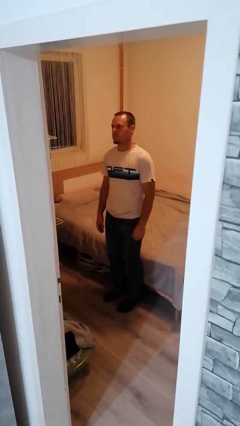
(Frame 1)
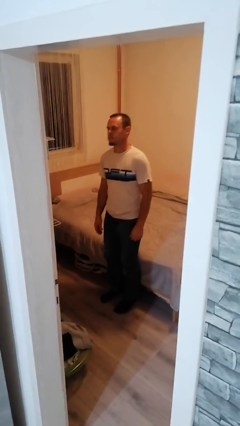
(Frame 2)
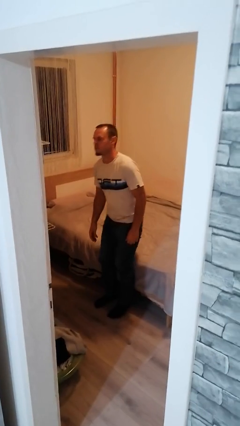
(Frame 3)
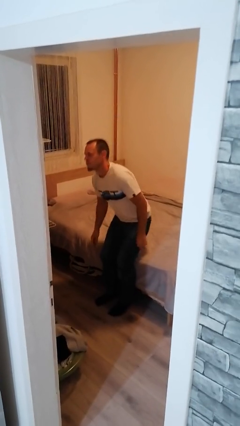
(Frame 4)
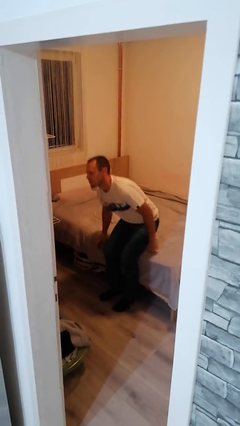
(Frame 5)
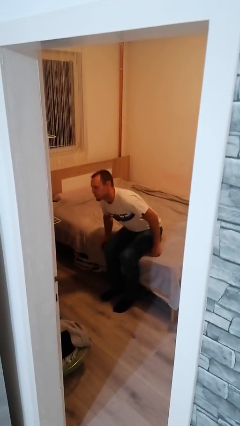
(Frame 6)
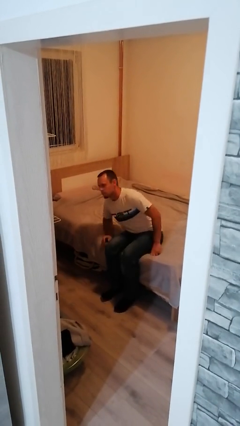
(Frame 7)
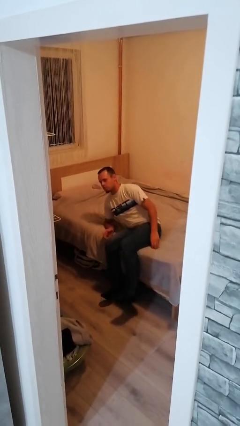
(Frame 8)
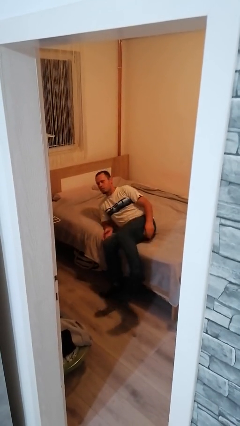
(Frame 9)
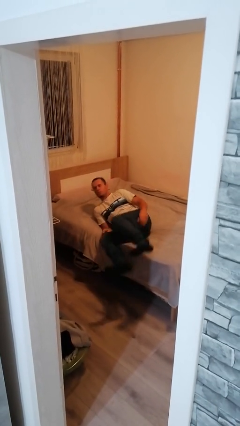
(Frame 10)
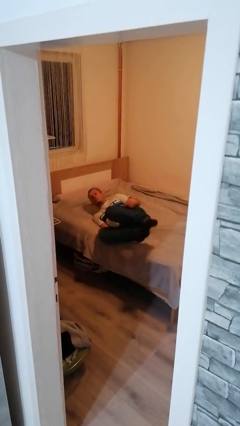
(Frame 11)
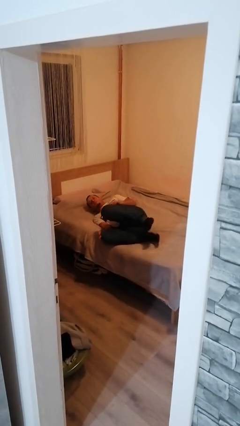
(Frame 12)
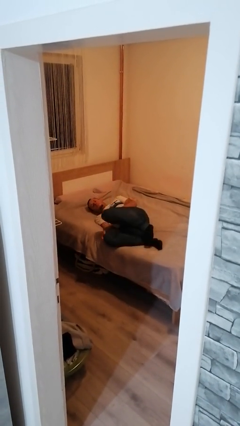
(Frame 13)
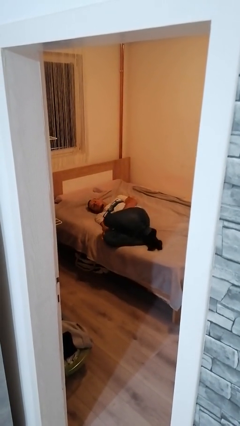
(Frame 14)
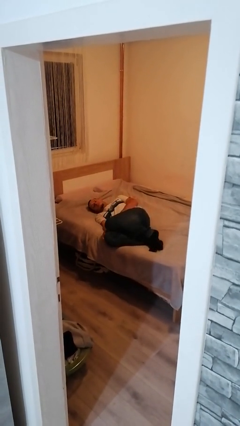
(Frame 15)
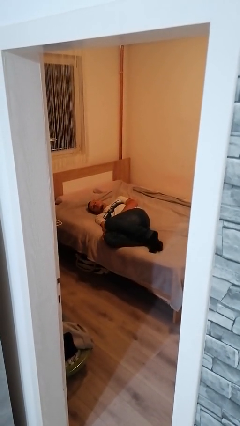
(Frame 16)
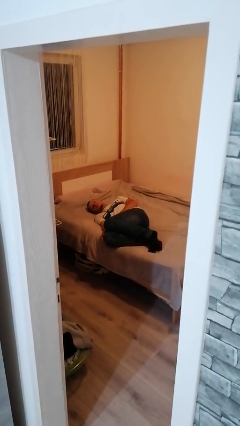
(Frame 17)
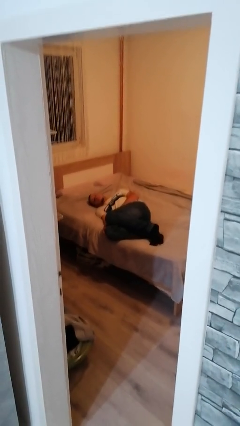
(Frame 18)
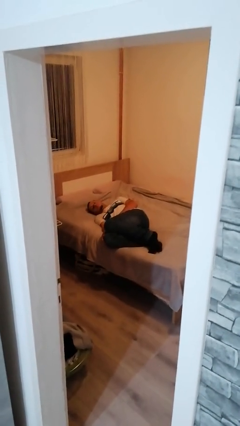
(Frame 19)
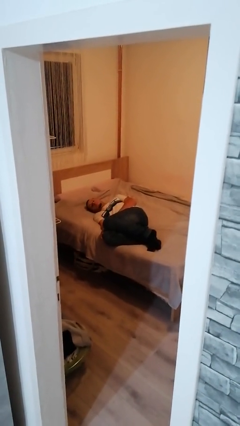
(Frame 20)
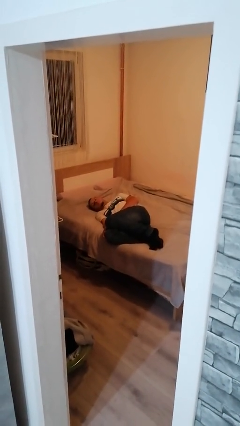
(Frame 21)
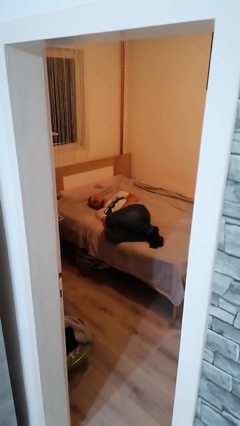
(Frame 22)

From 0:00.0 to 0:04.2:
person lies down on bed

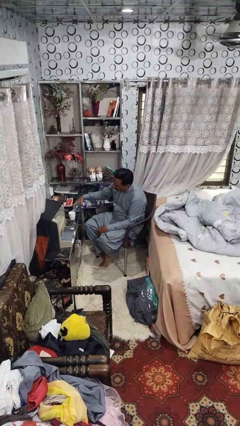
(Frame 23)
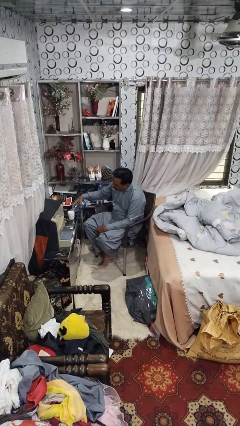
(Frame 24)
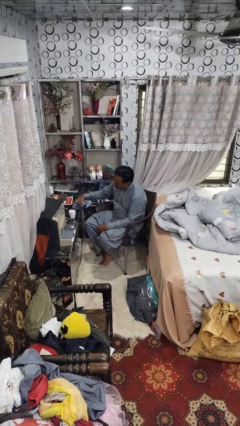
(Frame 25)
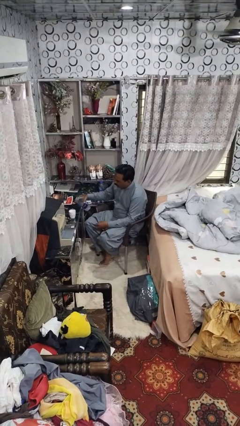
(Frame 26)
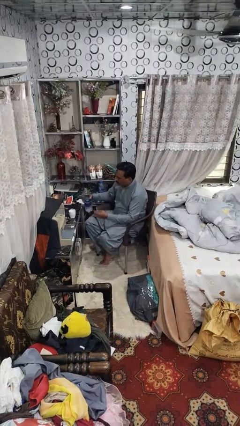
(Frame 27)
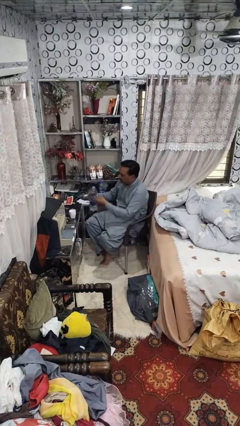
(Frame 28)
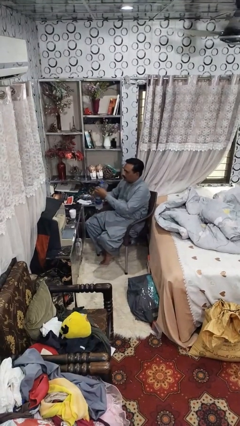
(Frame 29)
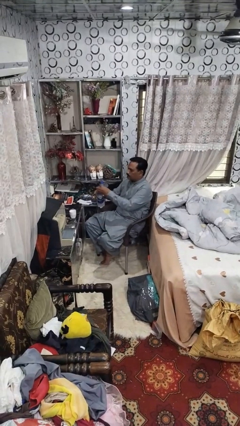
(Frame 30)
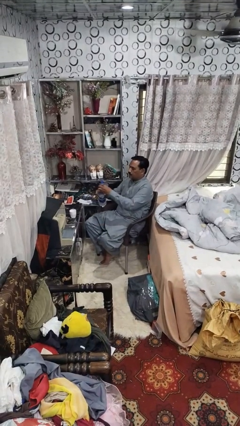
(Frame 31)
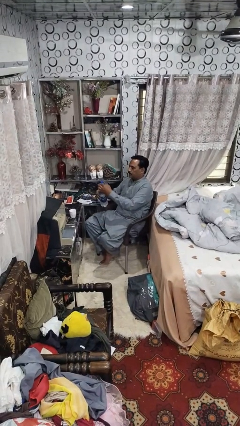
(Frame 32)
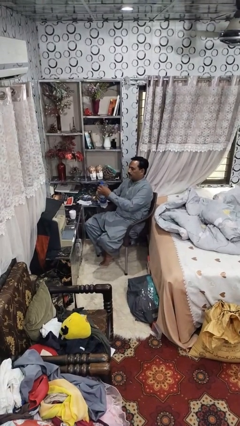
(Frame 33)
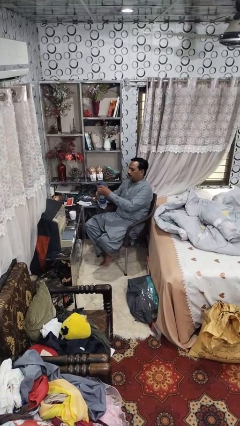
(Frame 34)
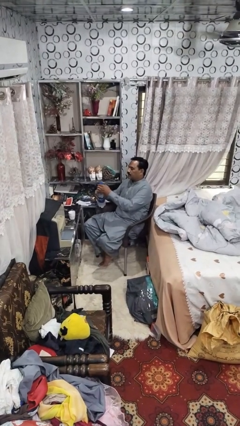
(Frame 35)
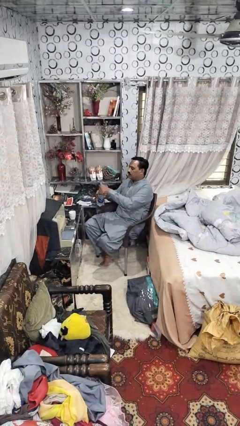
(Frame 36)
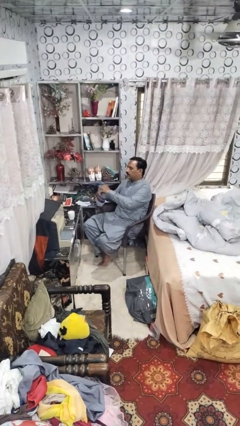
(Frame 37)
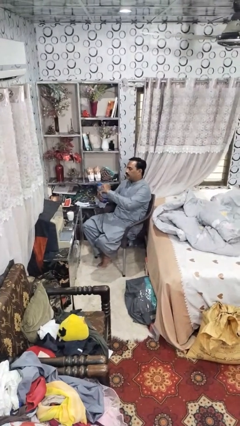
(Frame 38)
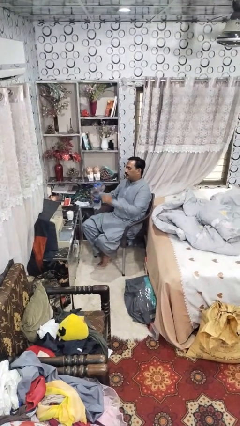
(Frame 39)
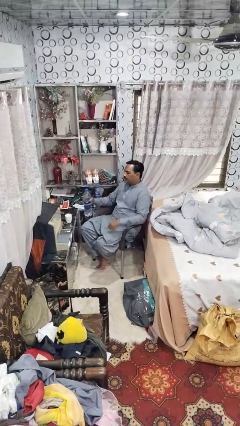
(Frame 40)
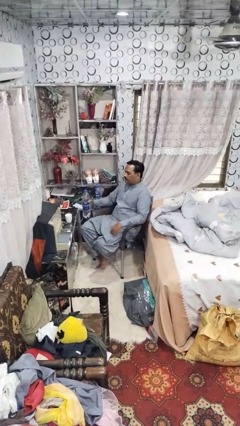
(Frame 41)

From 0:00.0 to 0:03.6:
person screws lid to bottle

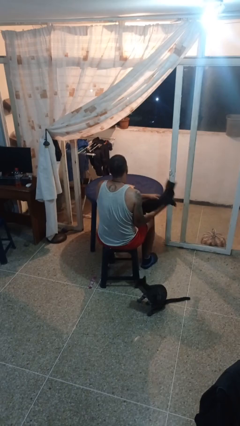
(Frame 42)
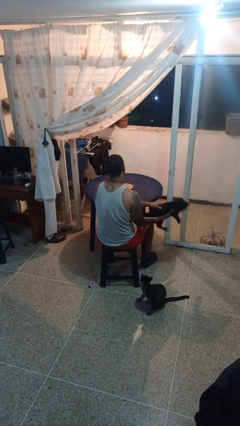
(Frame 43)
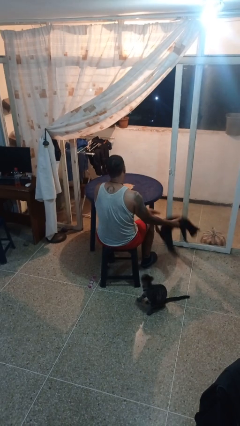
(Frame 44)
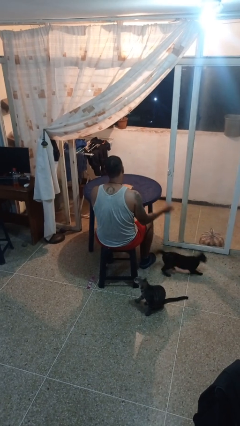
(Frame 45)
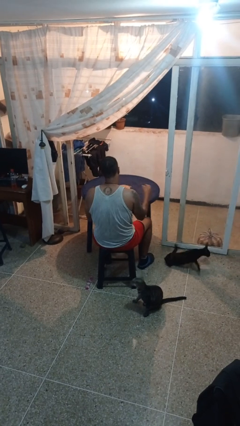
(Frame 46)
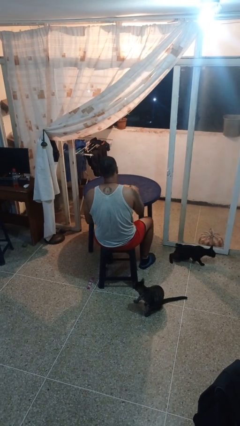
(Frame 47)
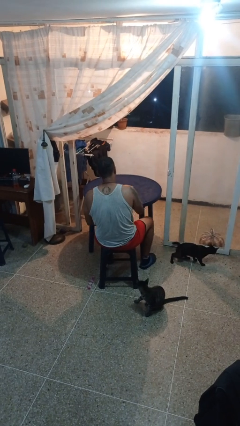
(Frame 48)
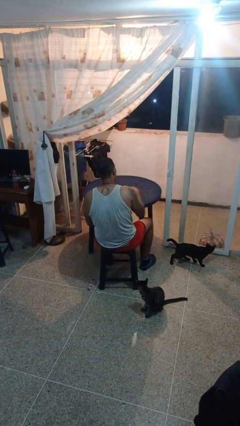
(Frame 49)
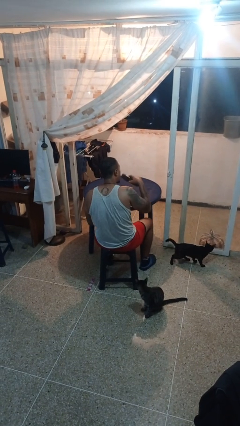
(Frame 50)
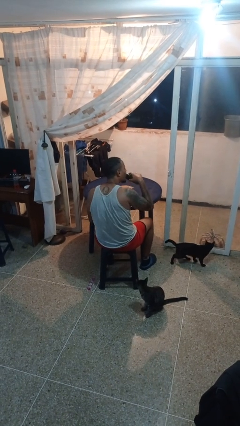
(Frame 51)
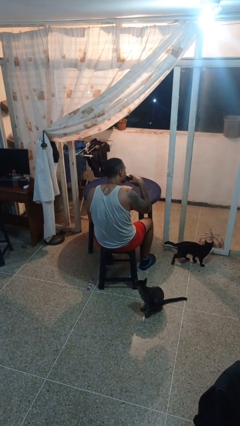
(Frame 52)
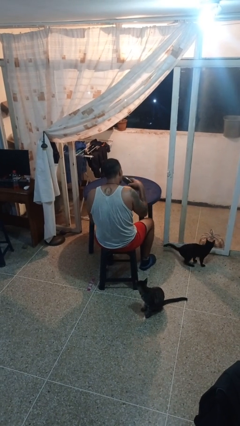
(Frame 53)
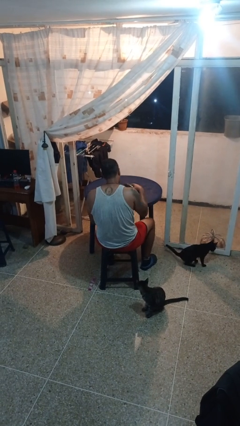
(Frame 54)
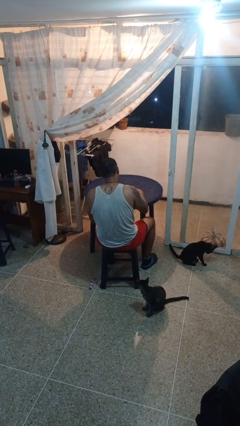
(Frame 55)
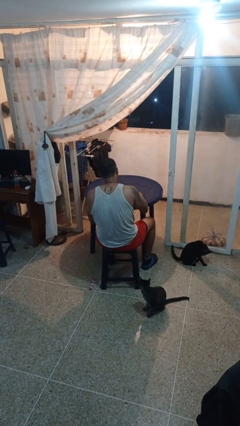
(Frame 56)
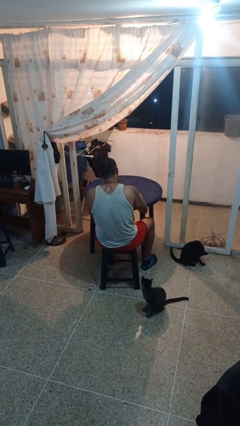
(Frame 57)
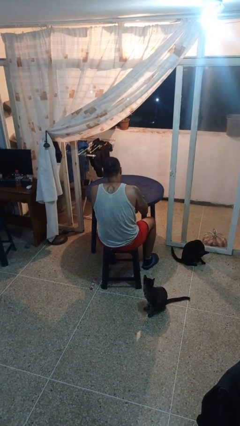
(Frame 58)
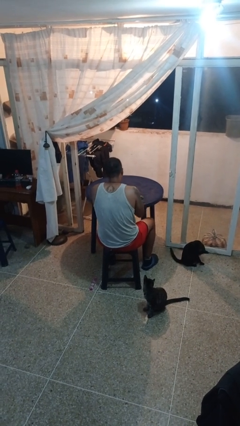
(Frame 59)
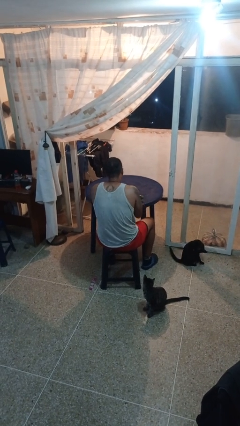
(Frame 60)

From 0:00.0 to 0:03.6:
person eats with hands

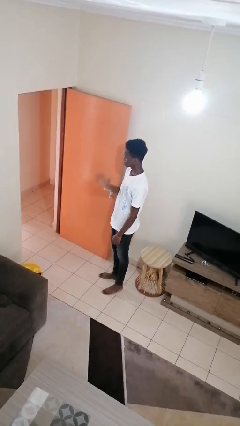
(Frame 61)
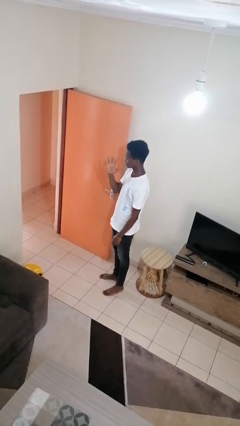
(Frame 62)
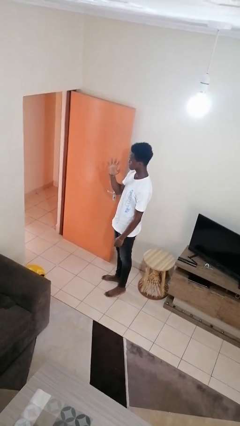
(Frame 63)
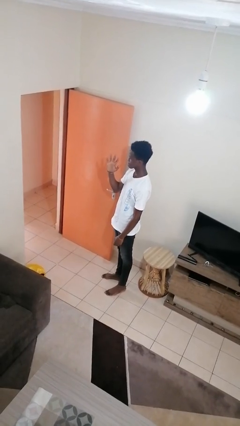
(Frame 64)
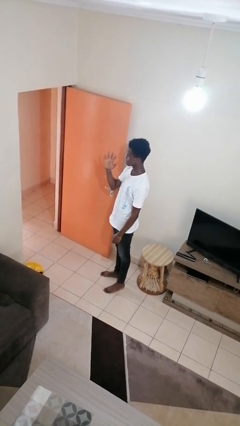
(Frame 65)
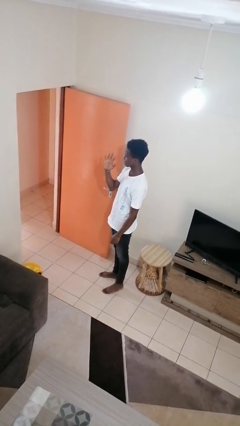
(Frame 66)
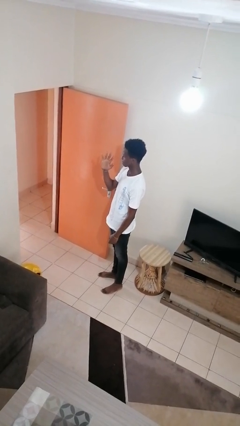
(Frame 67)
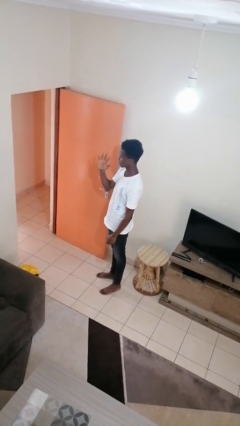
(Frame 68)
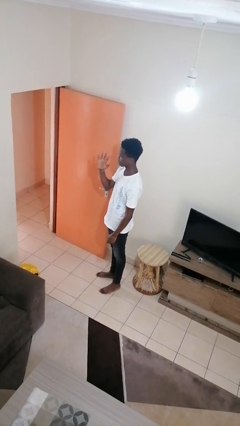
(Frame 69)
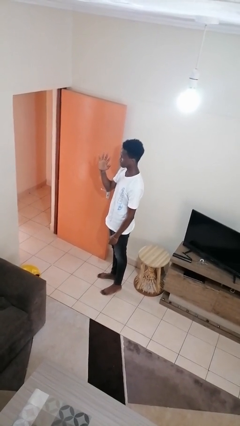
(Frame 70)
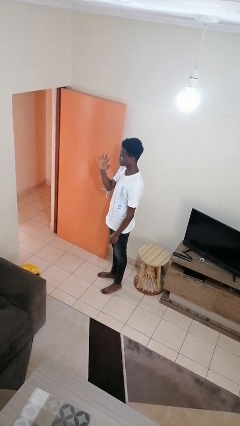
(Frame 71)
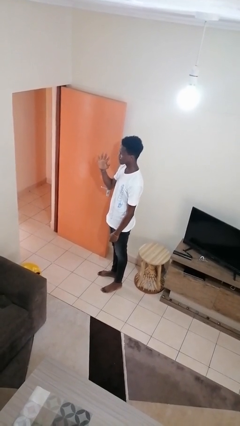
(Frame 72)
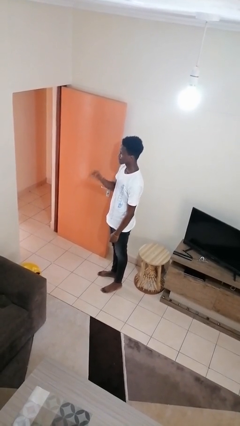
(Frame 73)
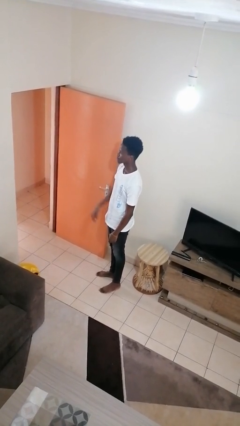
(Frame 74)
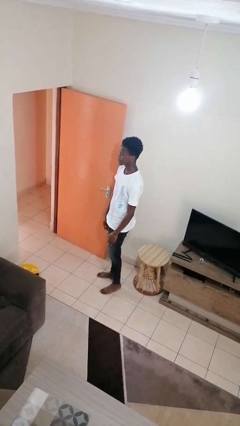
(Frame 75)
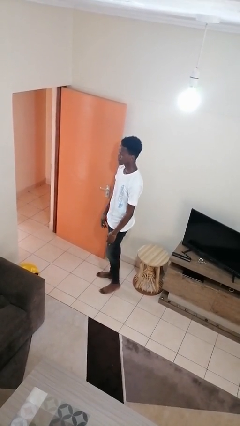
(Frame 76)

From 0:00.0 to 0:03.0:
person gestures number five

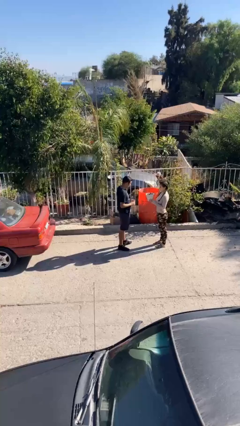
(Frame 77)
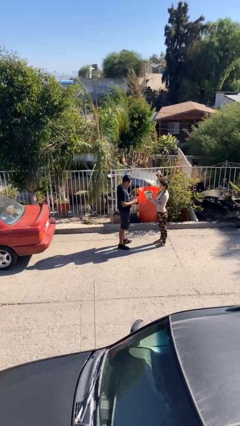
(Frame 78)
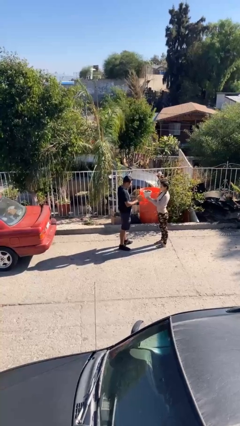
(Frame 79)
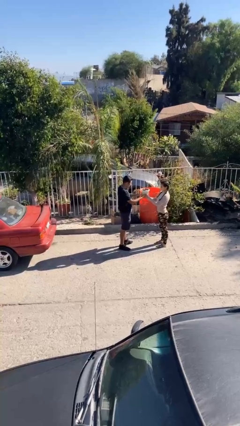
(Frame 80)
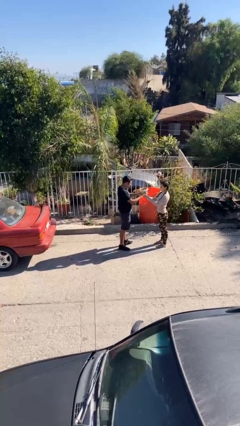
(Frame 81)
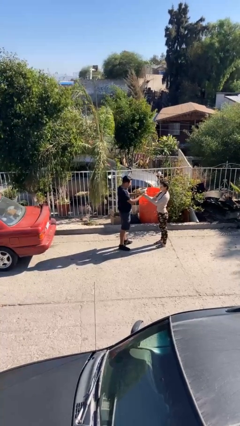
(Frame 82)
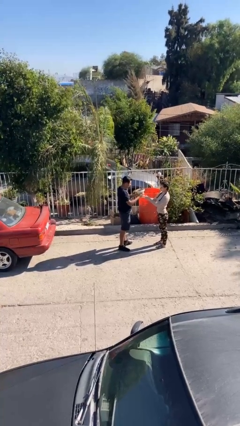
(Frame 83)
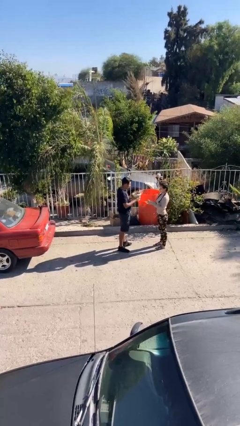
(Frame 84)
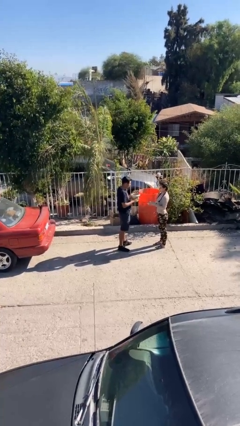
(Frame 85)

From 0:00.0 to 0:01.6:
person transfers object to person

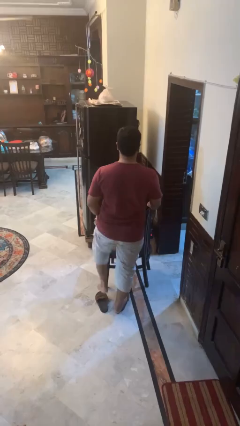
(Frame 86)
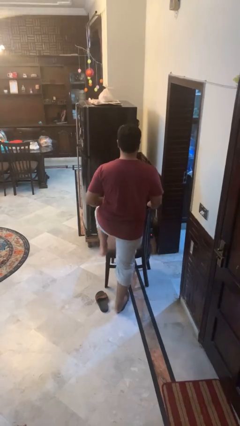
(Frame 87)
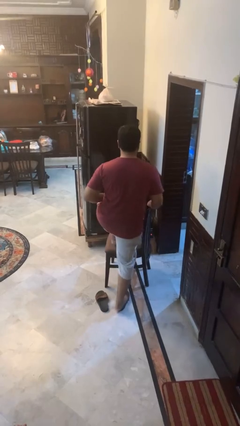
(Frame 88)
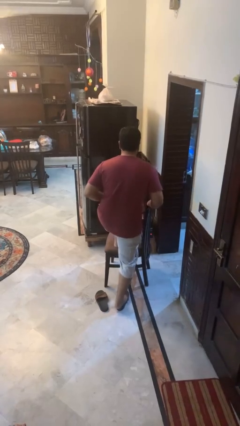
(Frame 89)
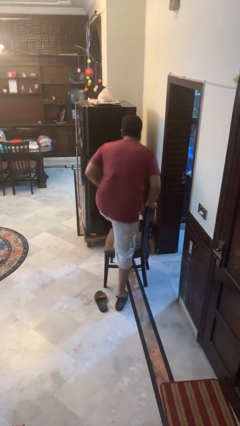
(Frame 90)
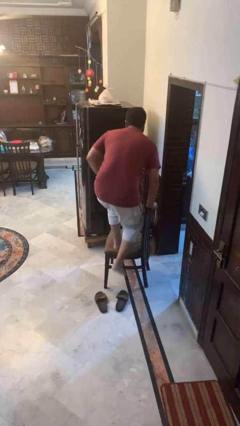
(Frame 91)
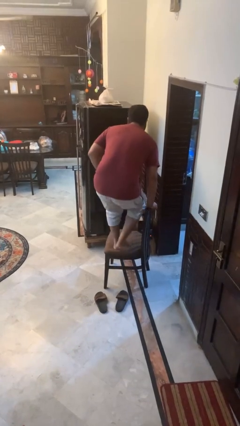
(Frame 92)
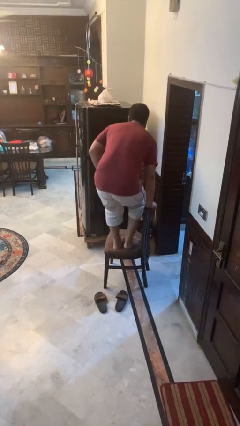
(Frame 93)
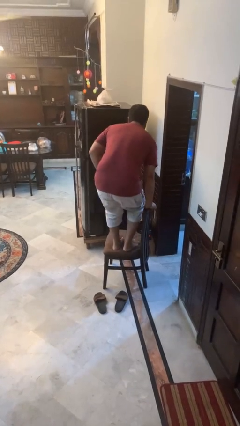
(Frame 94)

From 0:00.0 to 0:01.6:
person climbs on chair
